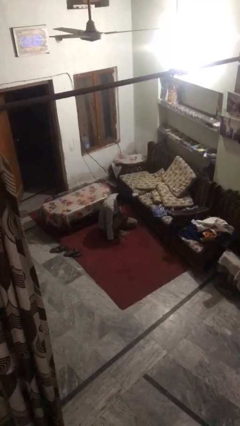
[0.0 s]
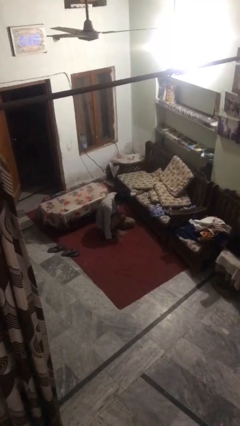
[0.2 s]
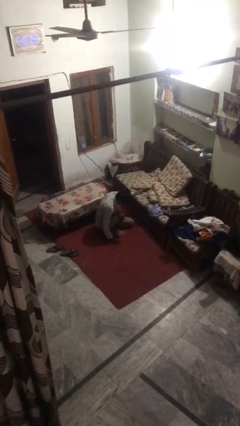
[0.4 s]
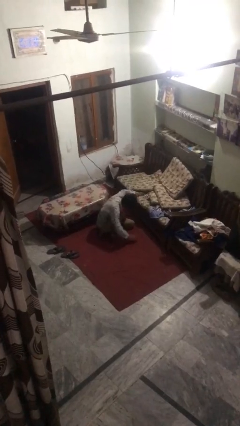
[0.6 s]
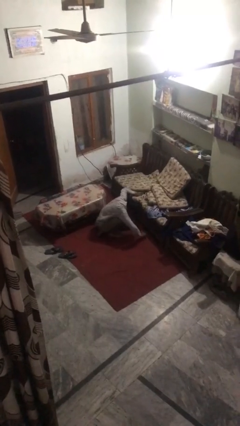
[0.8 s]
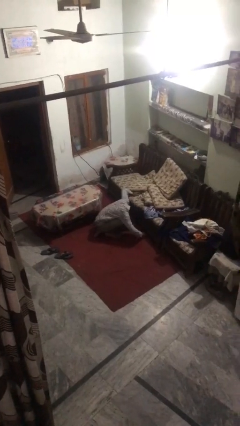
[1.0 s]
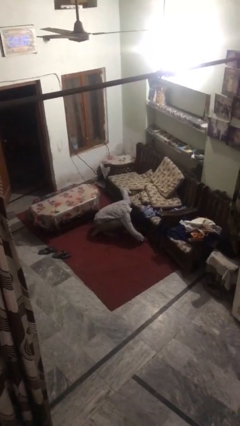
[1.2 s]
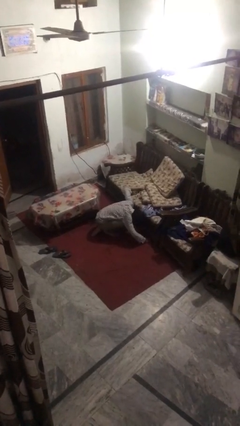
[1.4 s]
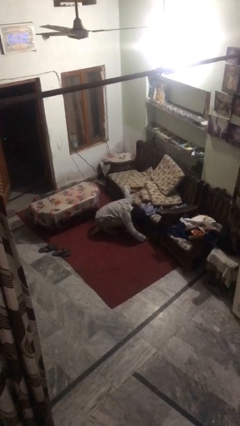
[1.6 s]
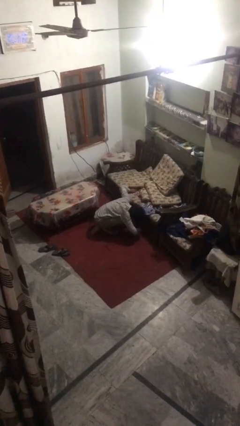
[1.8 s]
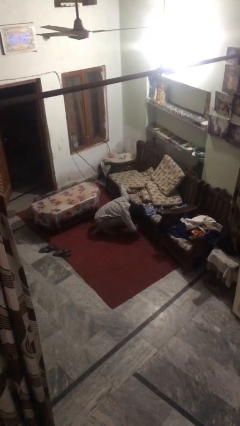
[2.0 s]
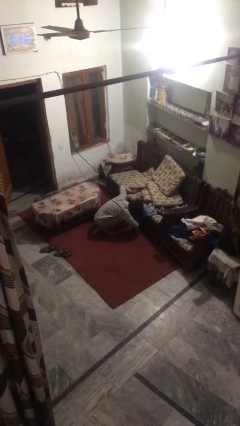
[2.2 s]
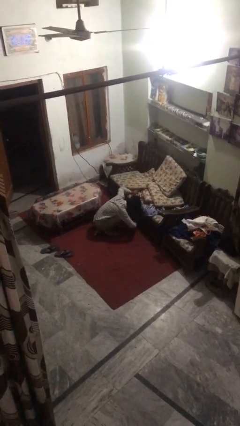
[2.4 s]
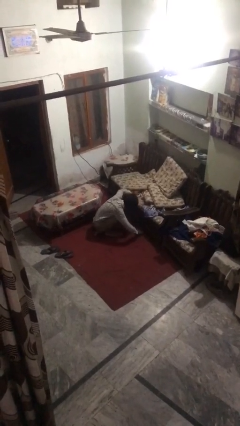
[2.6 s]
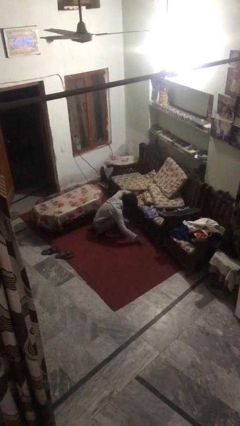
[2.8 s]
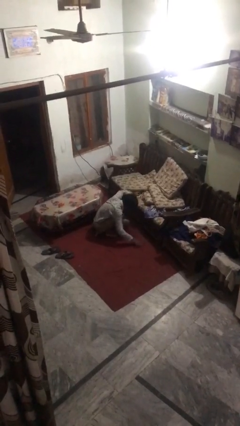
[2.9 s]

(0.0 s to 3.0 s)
person searches under couch

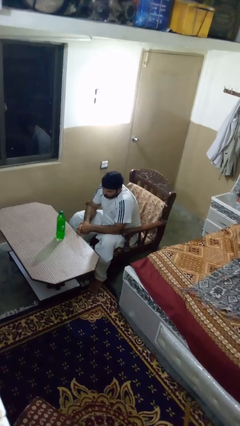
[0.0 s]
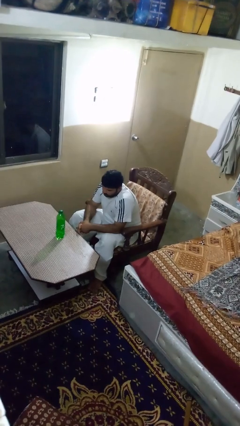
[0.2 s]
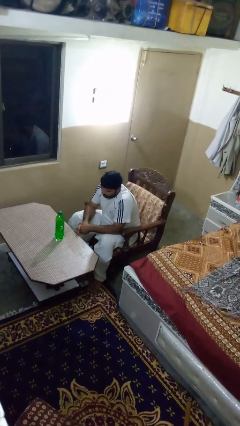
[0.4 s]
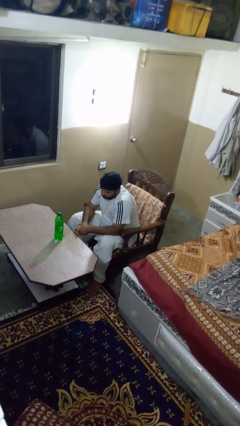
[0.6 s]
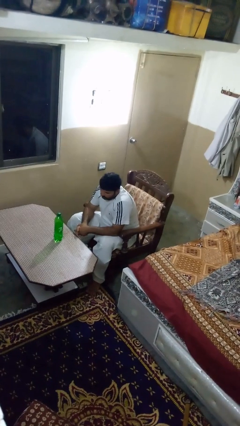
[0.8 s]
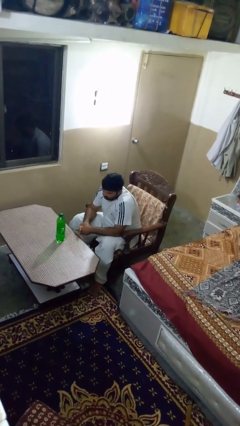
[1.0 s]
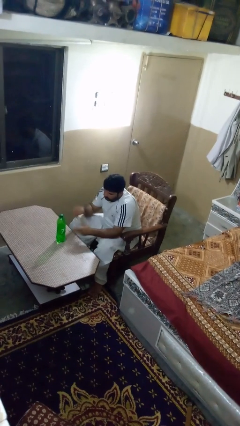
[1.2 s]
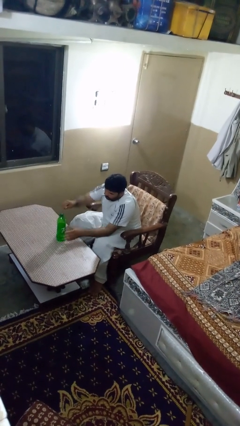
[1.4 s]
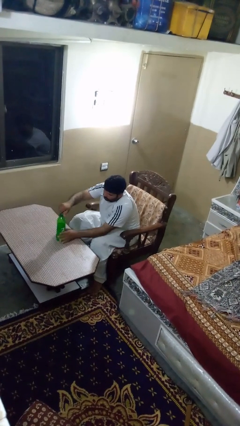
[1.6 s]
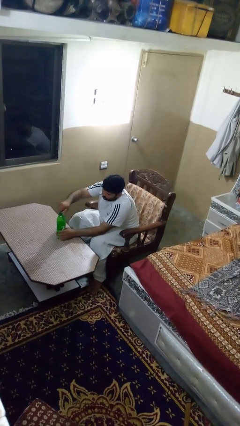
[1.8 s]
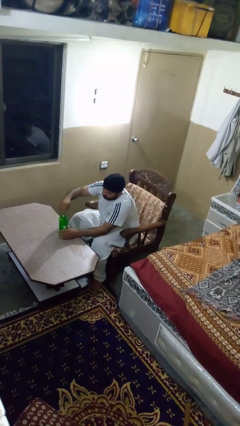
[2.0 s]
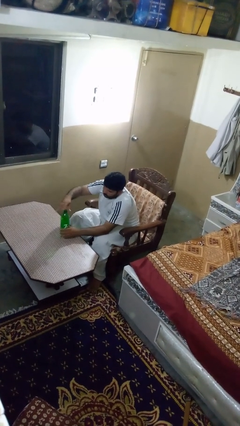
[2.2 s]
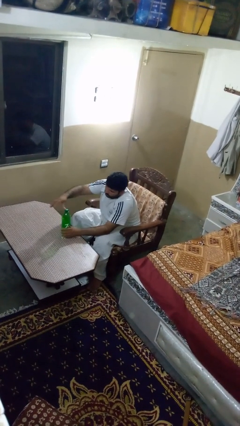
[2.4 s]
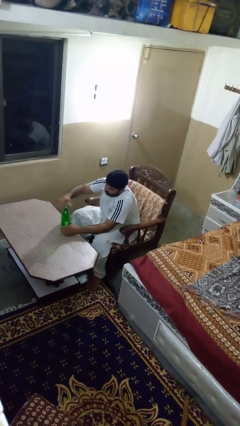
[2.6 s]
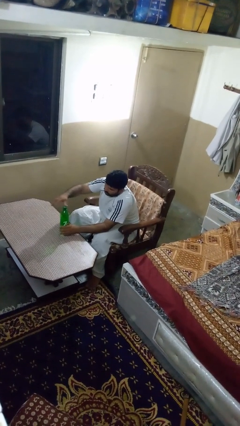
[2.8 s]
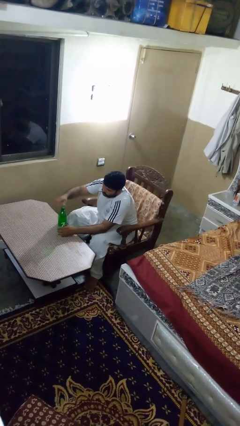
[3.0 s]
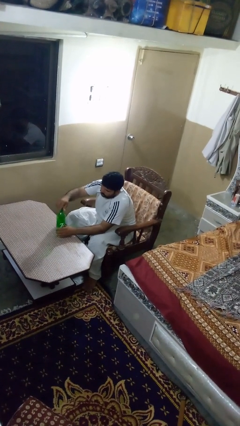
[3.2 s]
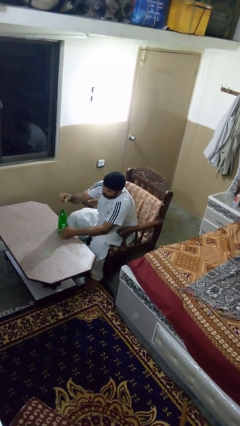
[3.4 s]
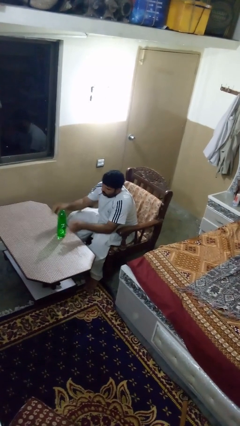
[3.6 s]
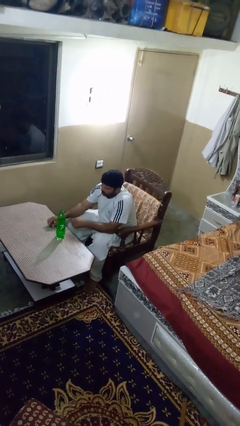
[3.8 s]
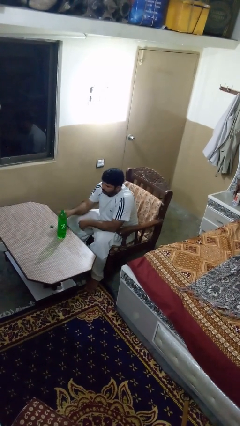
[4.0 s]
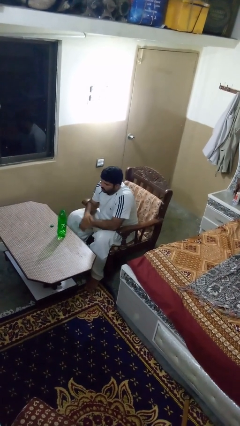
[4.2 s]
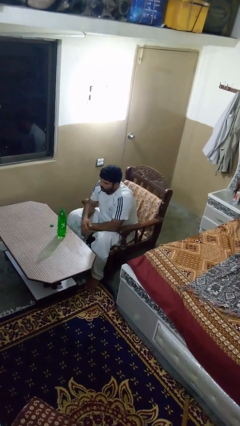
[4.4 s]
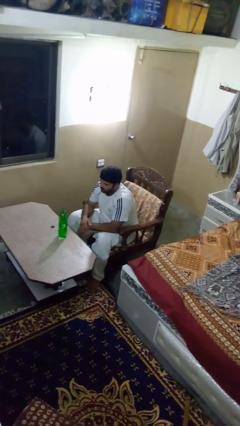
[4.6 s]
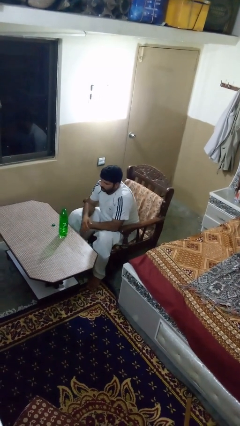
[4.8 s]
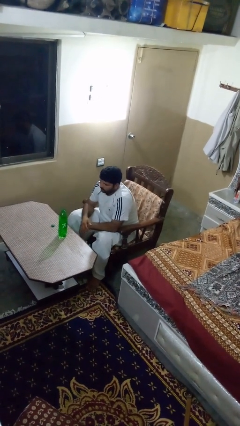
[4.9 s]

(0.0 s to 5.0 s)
person unscrews lid from bottle

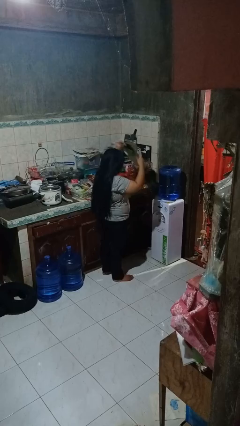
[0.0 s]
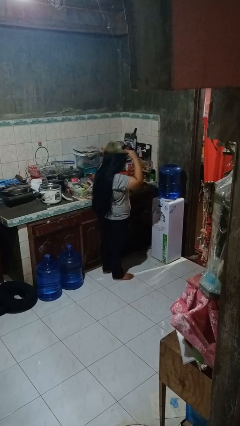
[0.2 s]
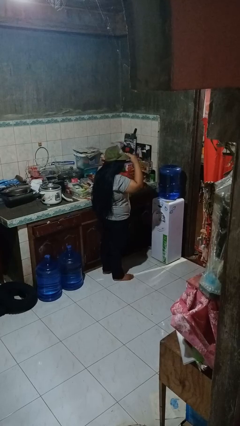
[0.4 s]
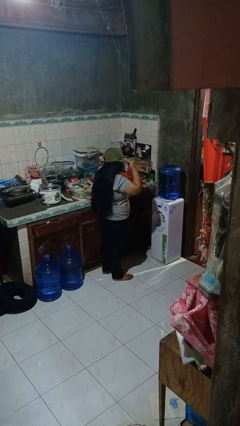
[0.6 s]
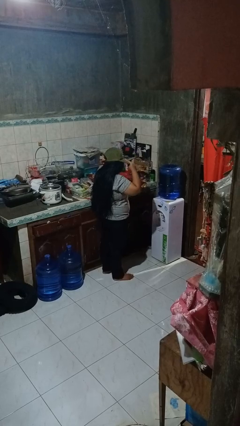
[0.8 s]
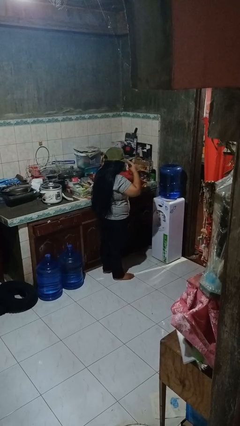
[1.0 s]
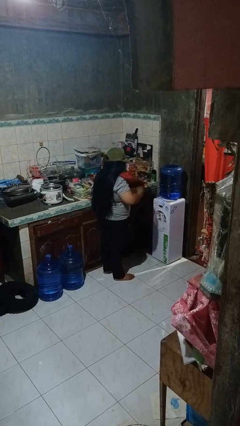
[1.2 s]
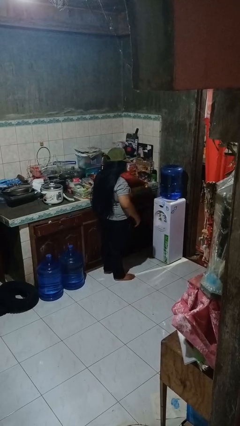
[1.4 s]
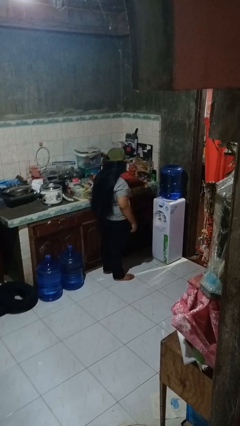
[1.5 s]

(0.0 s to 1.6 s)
person puts on hat

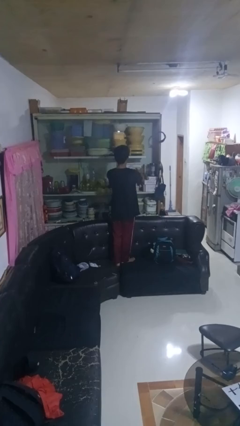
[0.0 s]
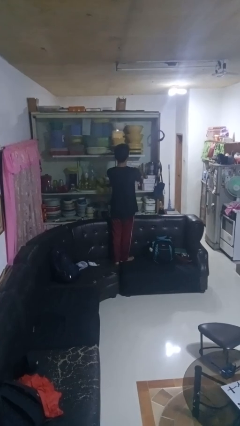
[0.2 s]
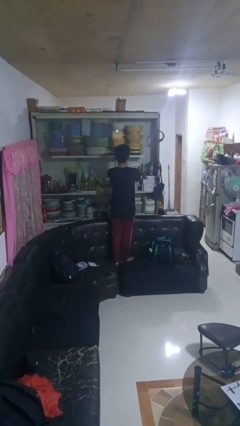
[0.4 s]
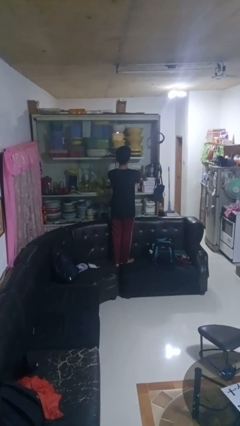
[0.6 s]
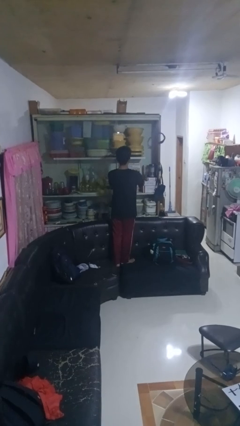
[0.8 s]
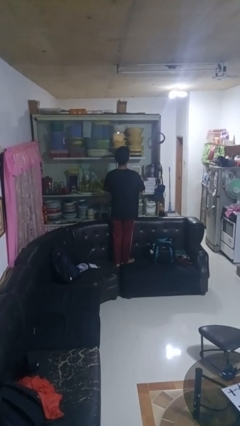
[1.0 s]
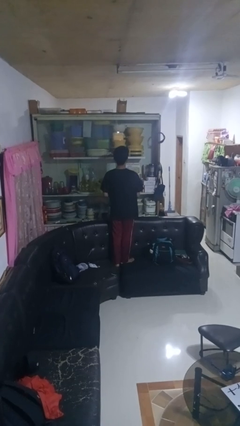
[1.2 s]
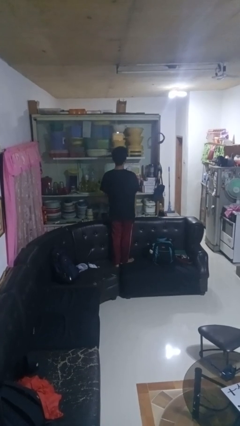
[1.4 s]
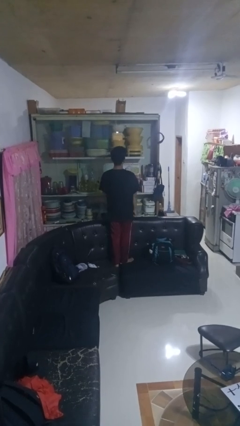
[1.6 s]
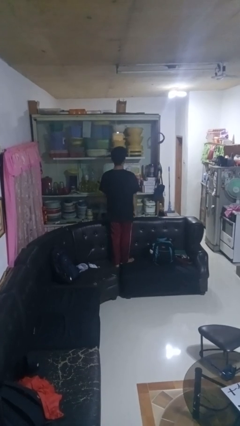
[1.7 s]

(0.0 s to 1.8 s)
person puts down object into cabinet

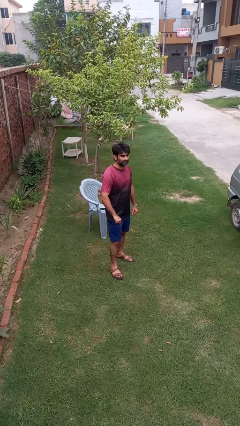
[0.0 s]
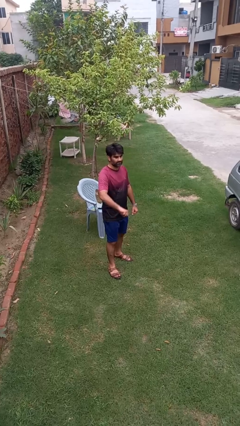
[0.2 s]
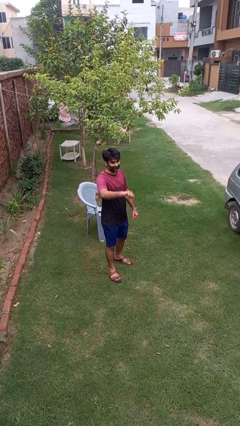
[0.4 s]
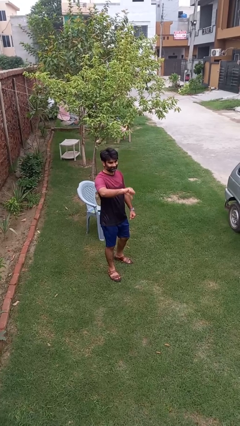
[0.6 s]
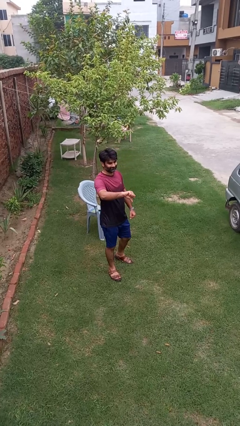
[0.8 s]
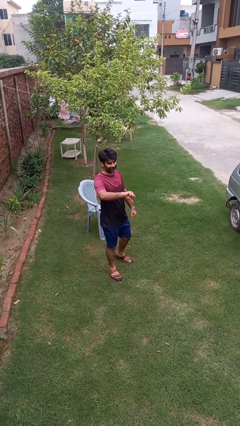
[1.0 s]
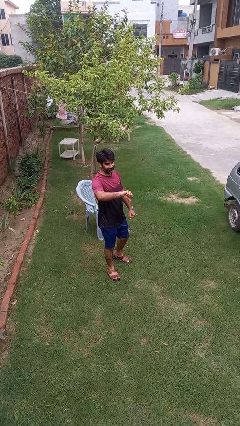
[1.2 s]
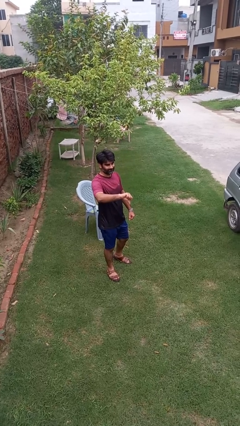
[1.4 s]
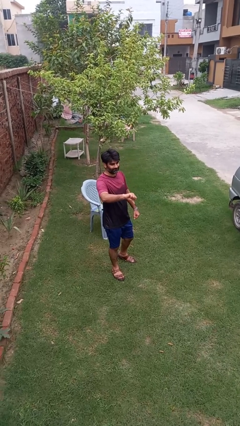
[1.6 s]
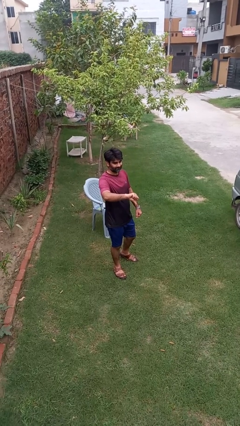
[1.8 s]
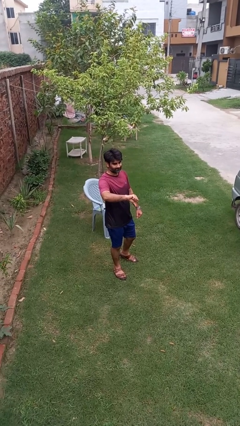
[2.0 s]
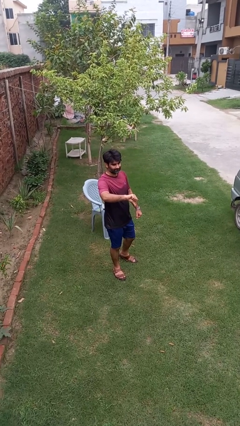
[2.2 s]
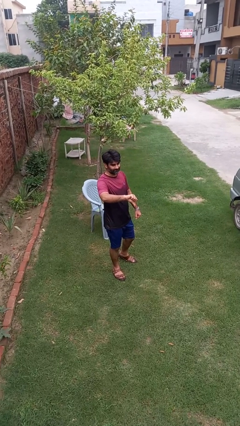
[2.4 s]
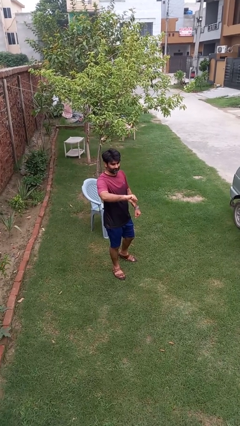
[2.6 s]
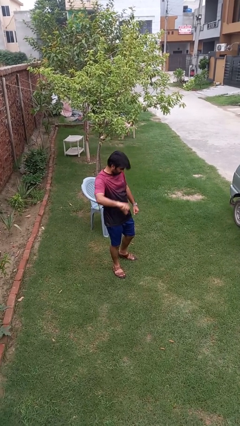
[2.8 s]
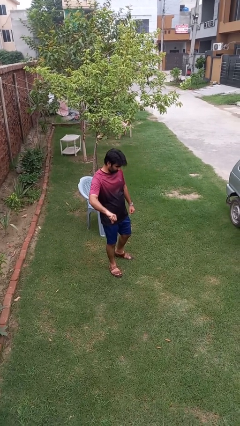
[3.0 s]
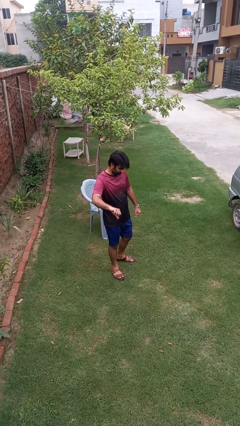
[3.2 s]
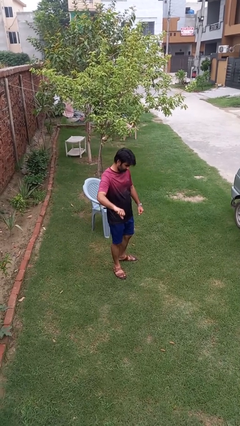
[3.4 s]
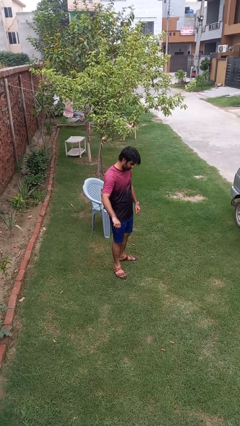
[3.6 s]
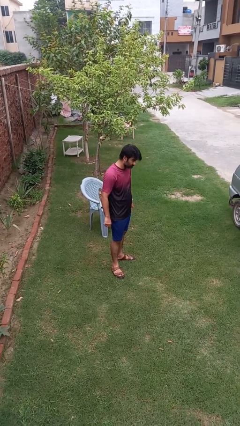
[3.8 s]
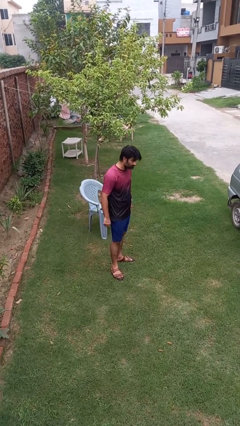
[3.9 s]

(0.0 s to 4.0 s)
person gestures thumbs down

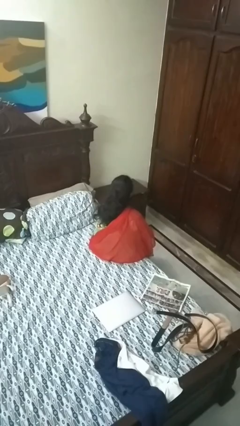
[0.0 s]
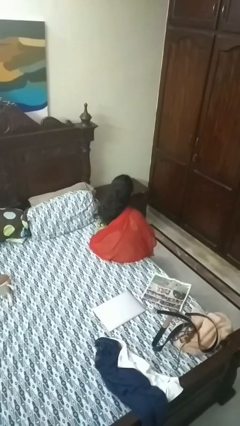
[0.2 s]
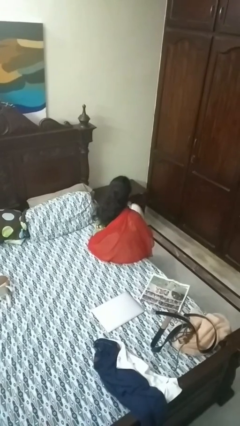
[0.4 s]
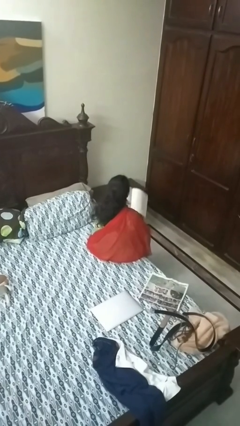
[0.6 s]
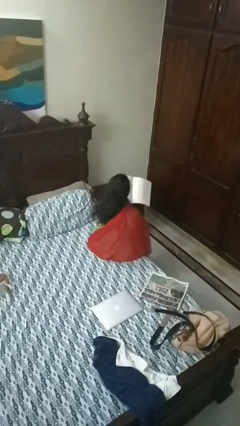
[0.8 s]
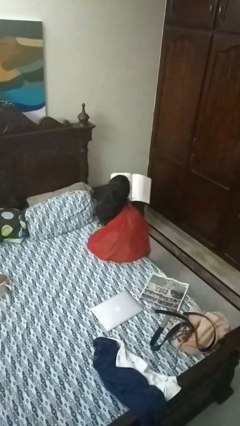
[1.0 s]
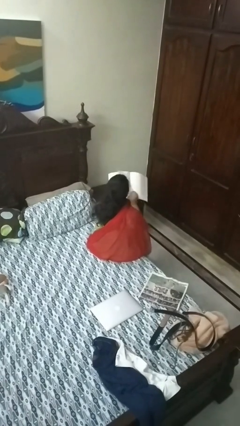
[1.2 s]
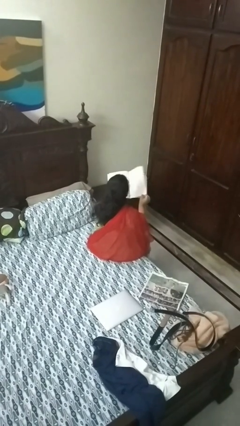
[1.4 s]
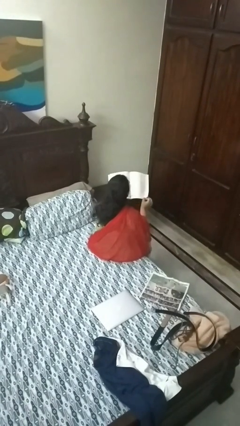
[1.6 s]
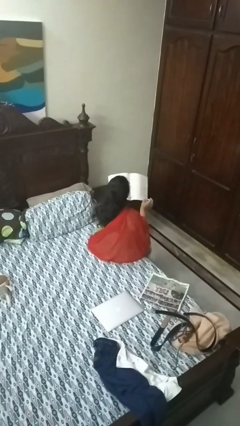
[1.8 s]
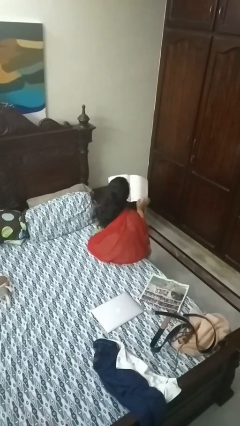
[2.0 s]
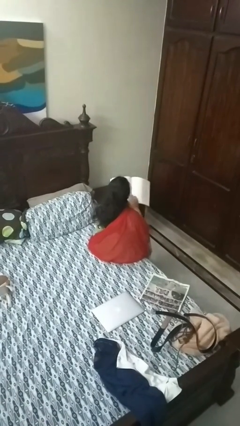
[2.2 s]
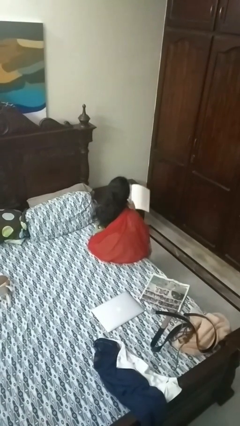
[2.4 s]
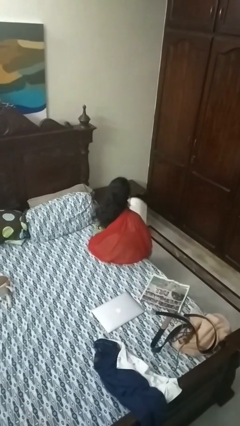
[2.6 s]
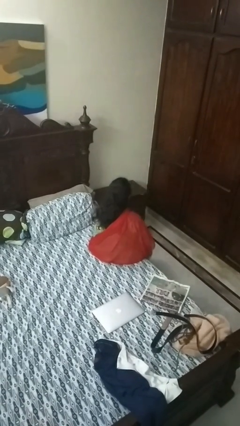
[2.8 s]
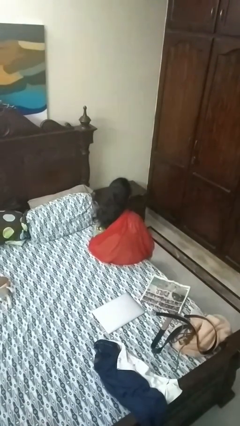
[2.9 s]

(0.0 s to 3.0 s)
person reads book
